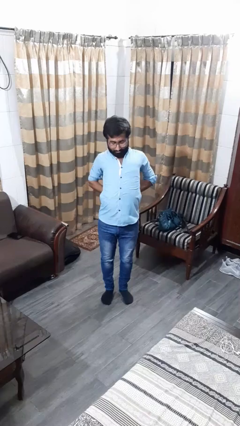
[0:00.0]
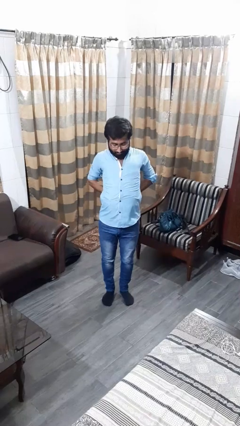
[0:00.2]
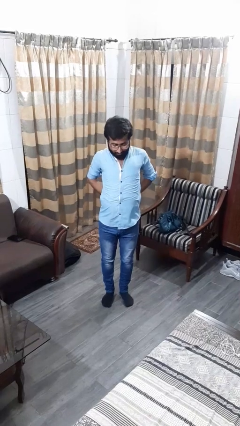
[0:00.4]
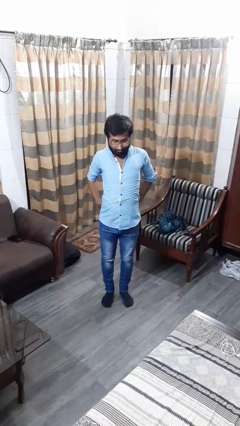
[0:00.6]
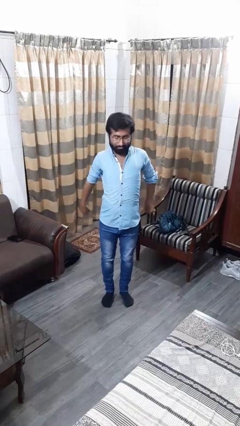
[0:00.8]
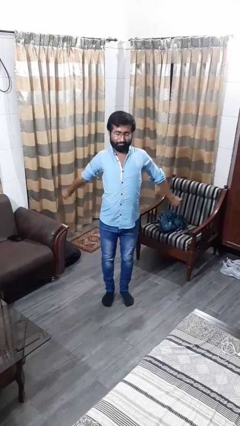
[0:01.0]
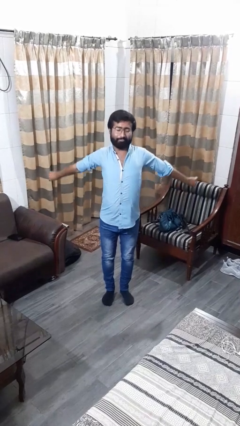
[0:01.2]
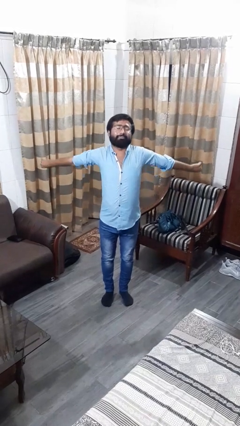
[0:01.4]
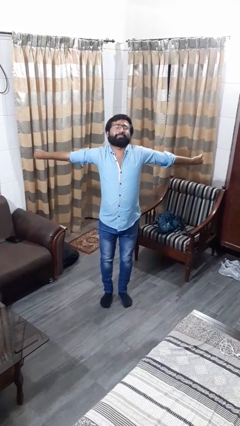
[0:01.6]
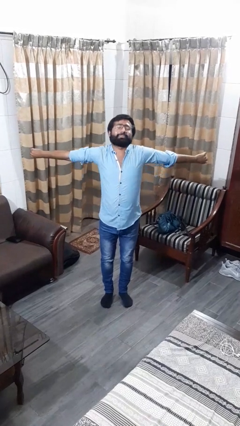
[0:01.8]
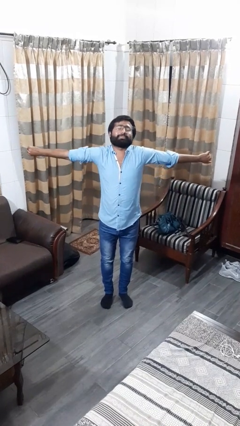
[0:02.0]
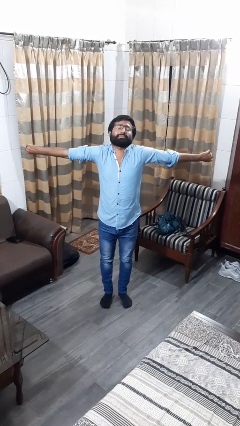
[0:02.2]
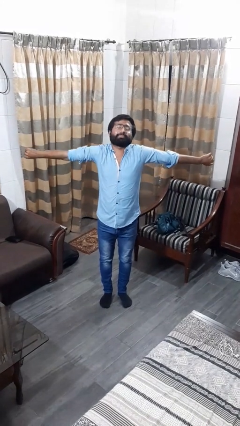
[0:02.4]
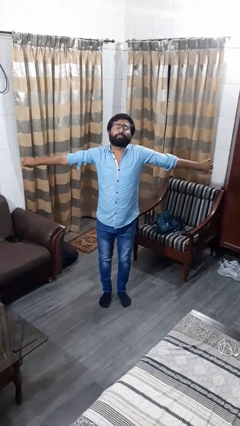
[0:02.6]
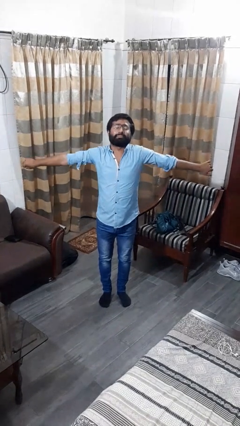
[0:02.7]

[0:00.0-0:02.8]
person stretches arms to side

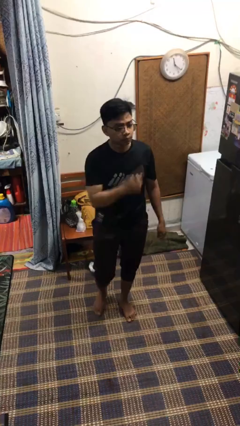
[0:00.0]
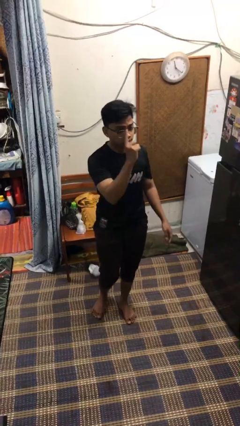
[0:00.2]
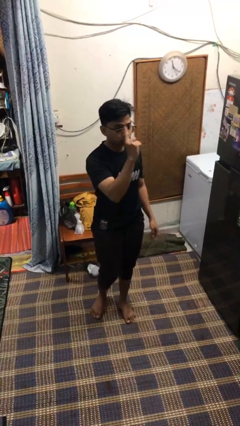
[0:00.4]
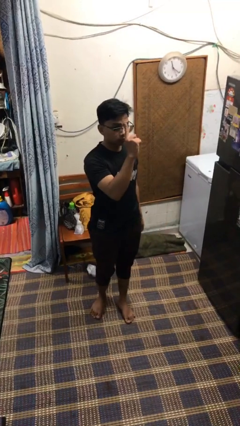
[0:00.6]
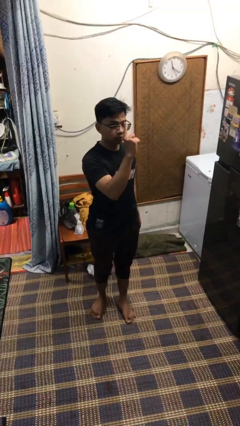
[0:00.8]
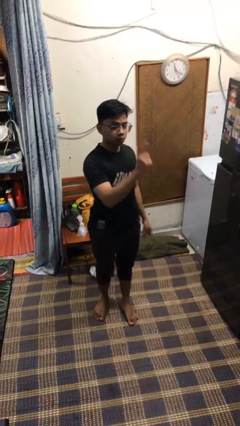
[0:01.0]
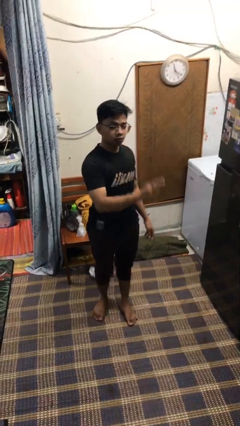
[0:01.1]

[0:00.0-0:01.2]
person gestures number one

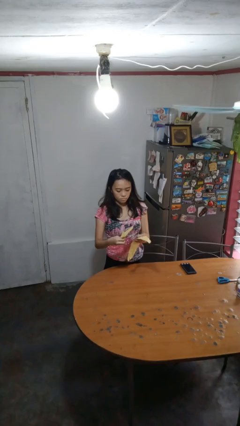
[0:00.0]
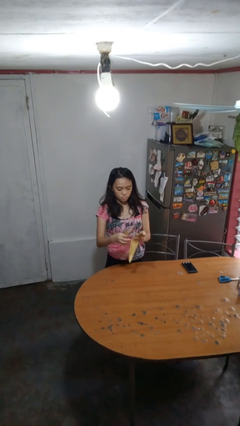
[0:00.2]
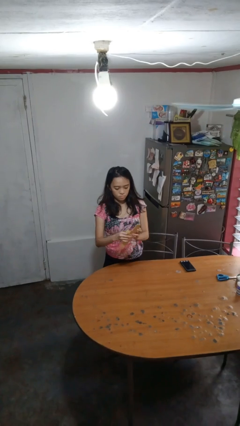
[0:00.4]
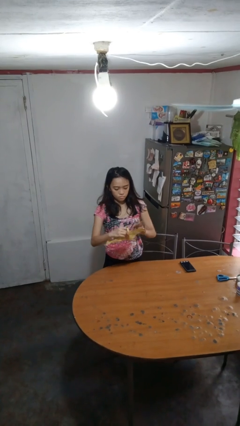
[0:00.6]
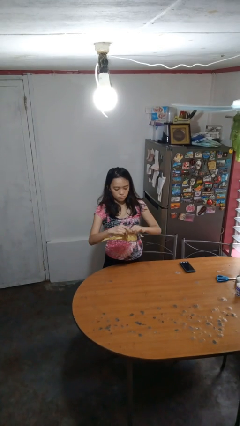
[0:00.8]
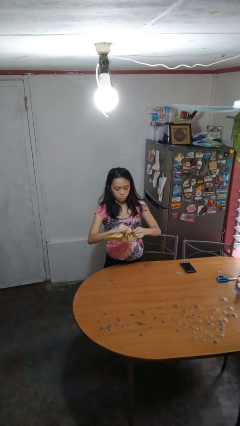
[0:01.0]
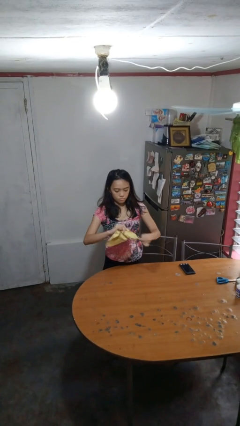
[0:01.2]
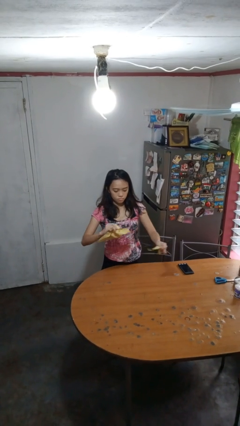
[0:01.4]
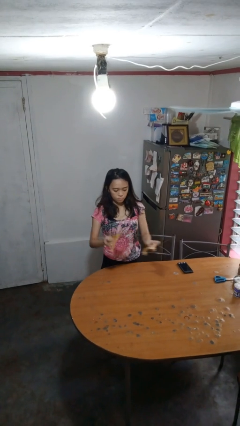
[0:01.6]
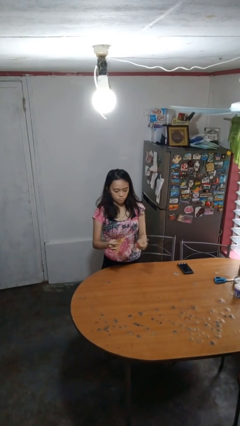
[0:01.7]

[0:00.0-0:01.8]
person tears paper

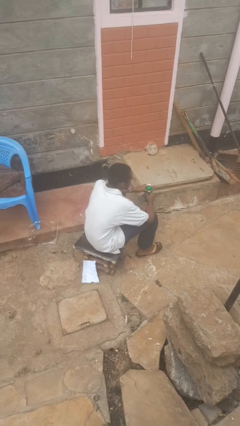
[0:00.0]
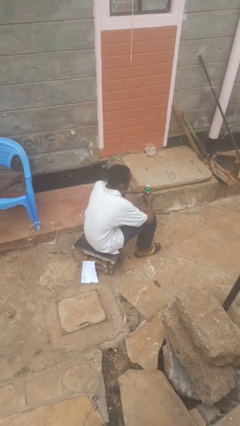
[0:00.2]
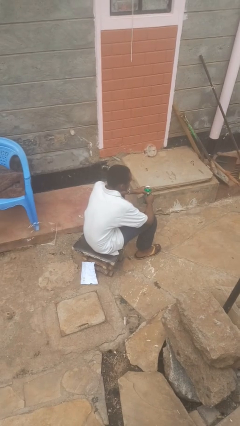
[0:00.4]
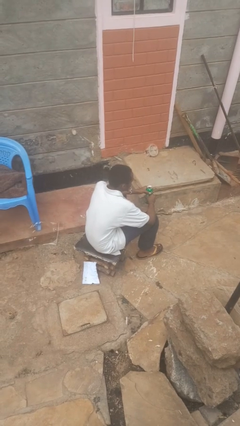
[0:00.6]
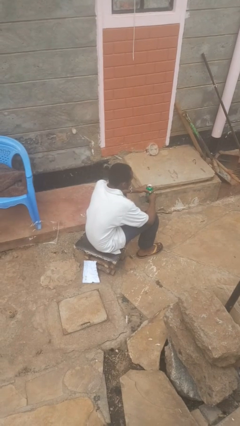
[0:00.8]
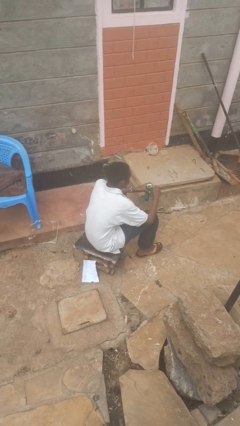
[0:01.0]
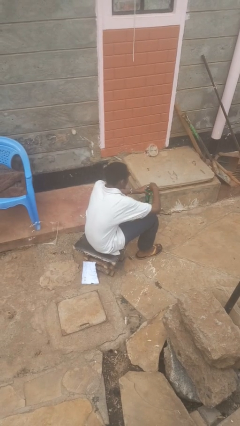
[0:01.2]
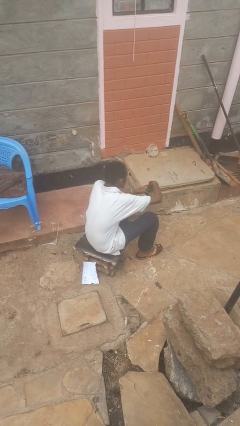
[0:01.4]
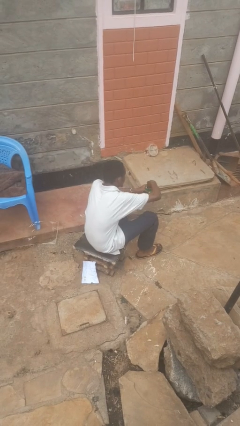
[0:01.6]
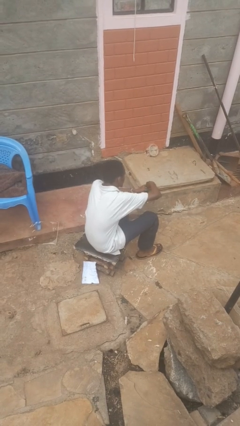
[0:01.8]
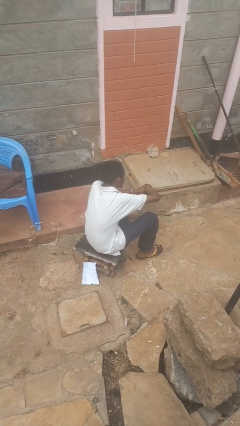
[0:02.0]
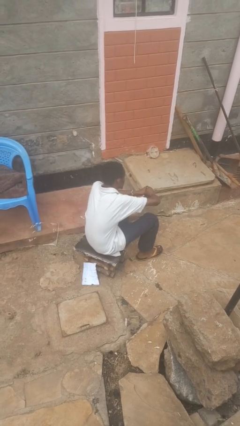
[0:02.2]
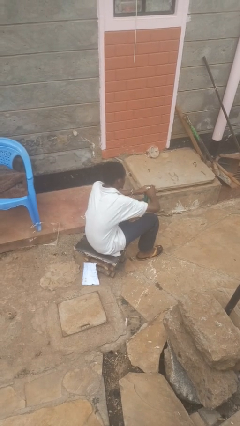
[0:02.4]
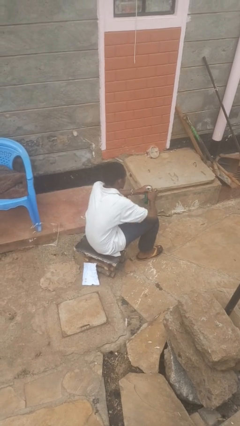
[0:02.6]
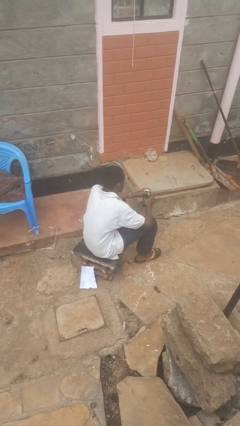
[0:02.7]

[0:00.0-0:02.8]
person opens beverage can

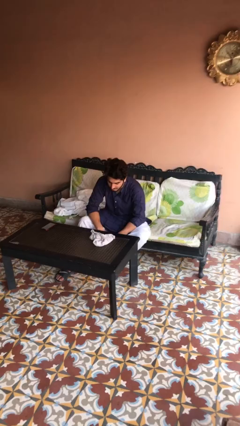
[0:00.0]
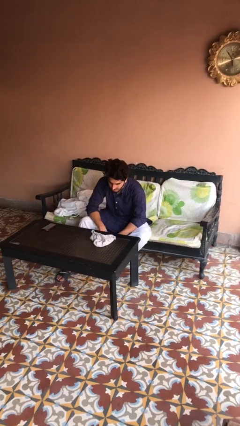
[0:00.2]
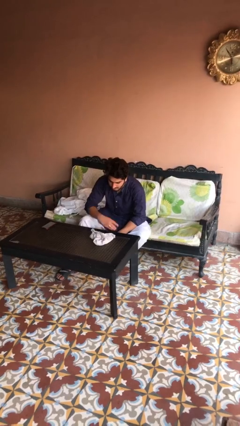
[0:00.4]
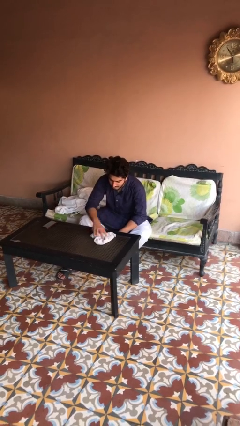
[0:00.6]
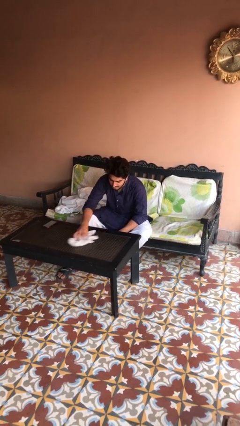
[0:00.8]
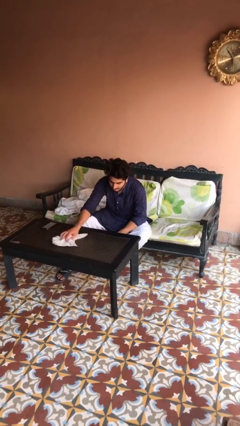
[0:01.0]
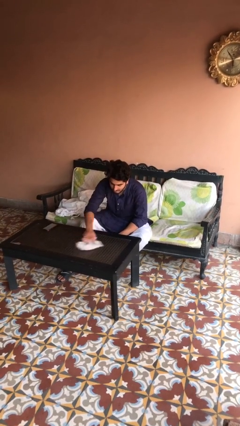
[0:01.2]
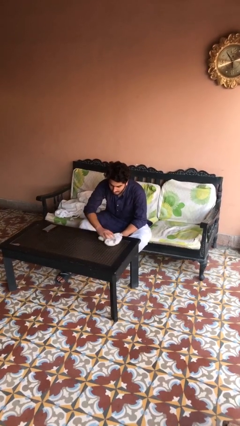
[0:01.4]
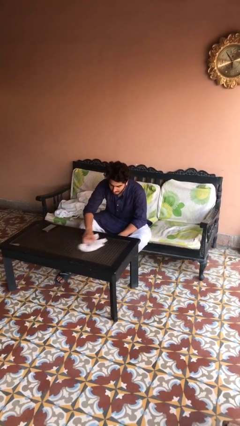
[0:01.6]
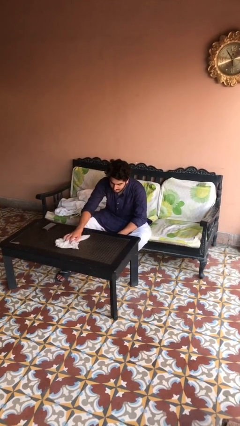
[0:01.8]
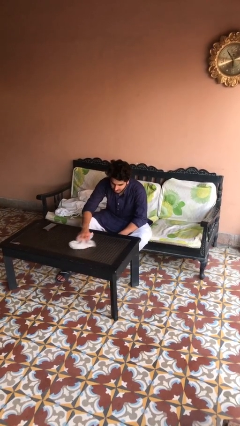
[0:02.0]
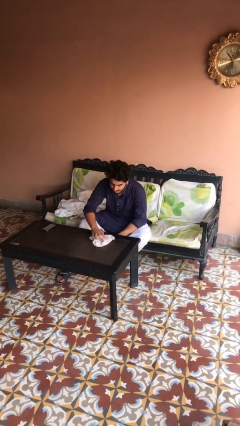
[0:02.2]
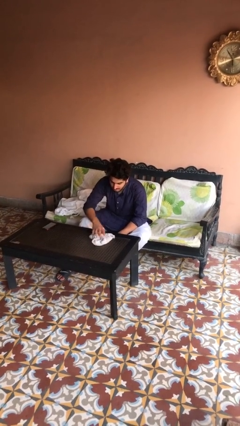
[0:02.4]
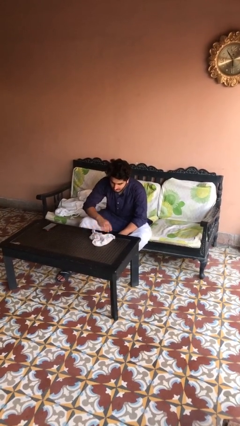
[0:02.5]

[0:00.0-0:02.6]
person cleans table with rag

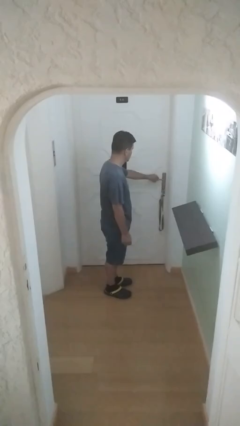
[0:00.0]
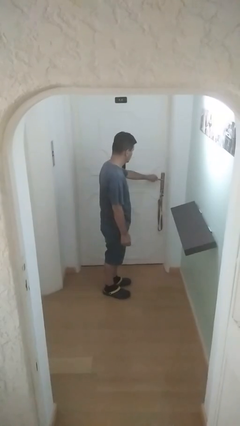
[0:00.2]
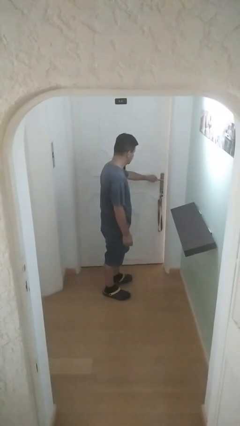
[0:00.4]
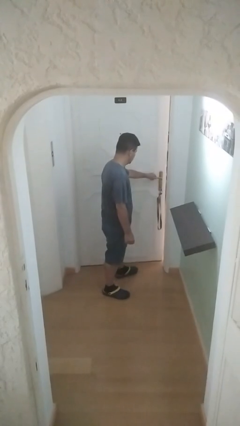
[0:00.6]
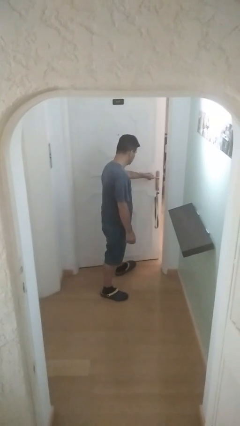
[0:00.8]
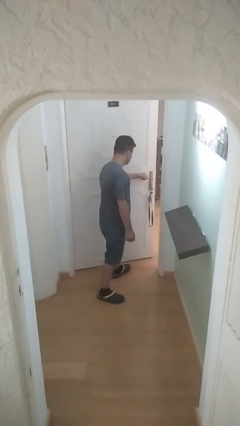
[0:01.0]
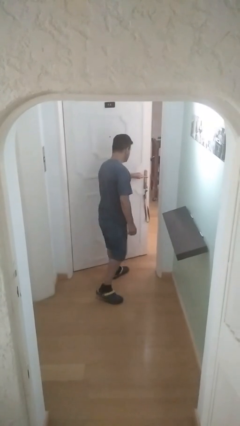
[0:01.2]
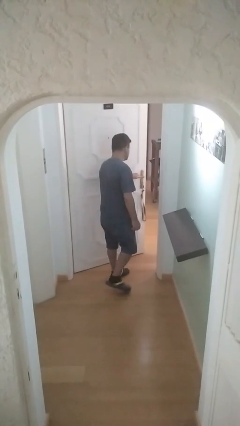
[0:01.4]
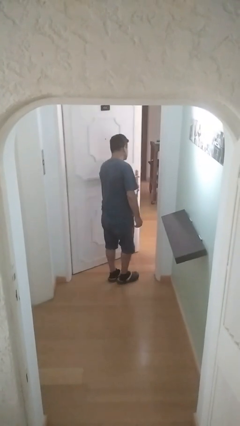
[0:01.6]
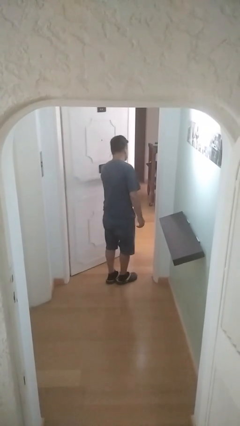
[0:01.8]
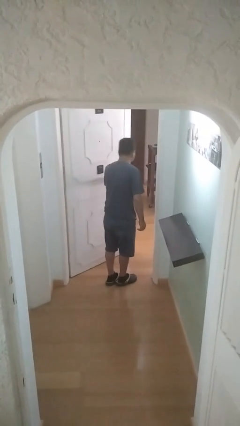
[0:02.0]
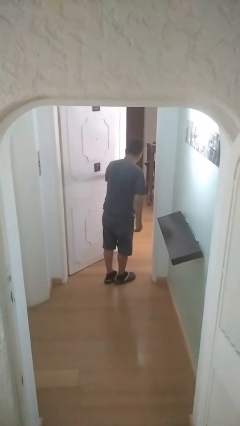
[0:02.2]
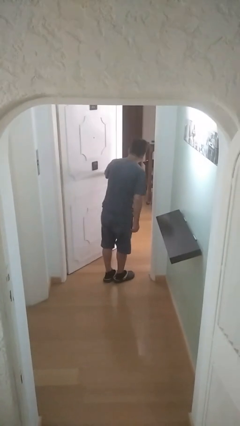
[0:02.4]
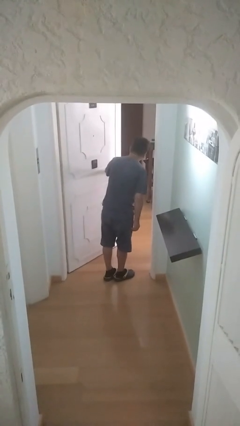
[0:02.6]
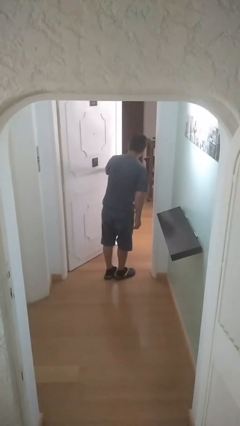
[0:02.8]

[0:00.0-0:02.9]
person opens facility door

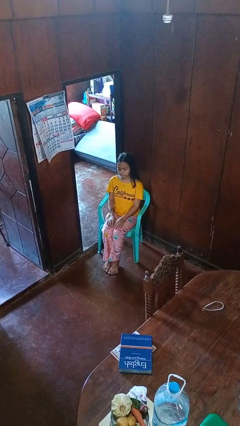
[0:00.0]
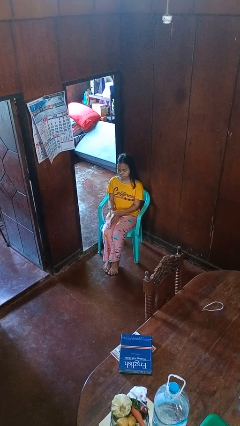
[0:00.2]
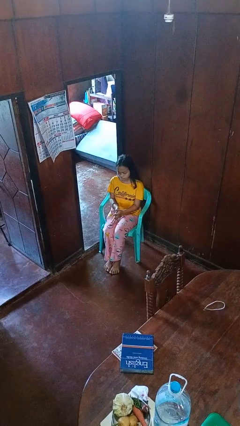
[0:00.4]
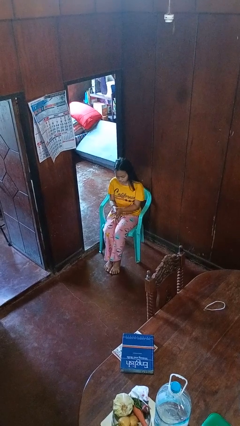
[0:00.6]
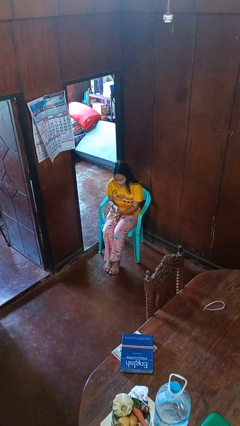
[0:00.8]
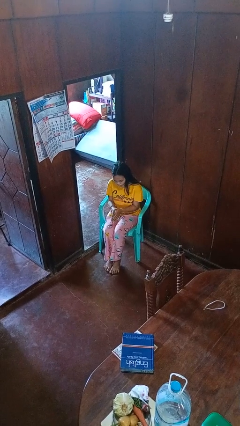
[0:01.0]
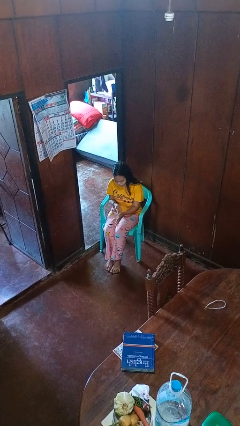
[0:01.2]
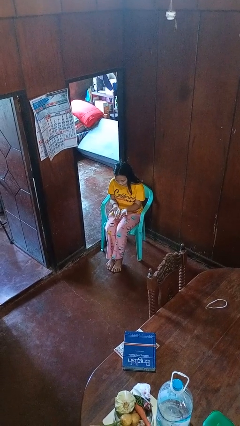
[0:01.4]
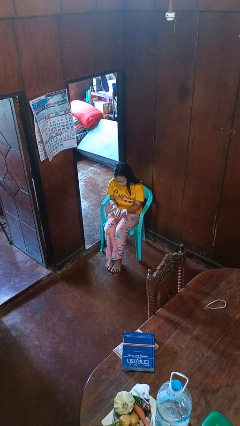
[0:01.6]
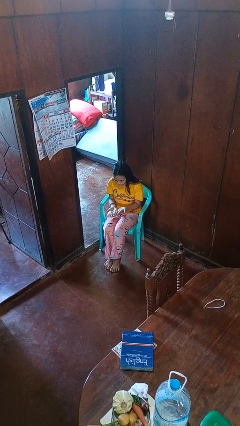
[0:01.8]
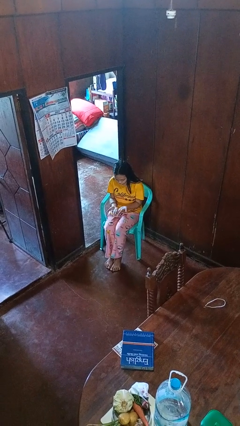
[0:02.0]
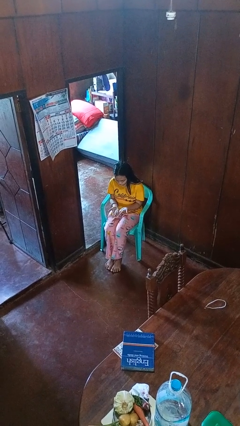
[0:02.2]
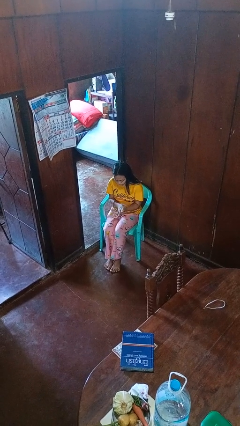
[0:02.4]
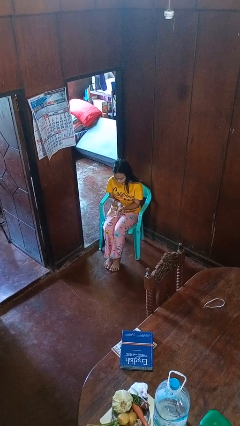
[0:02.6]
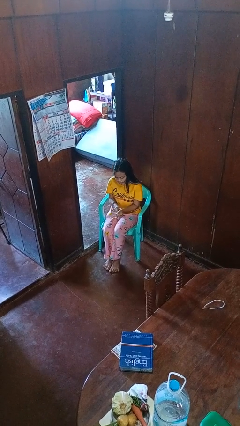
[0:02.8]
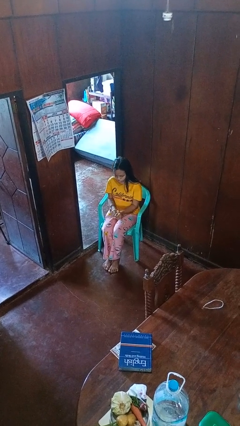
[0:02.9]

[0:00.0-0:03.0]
person looks at hands in lap

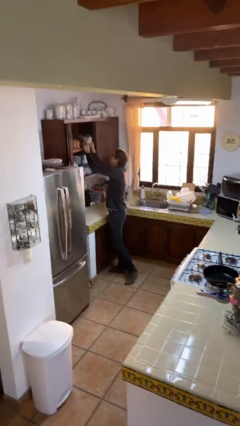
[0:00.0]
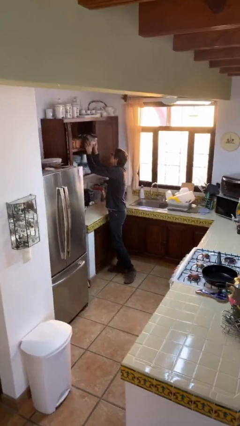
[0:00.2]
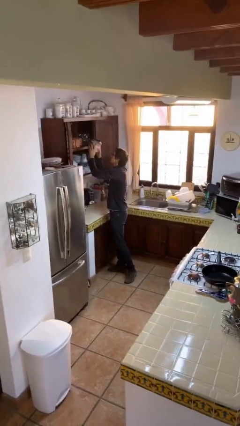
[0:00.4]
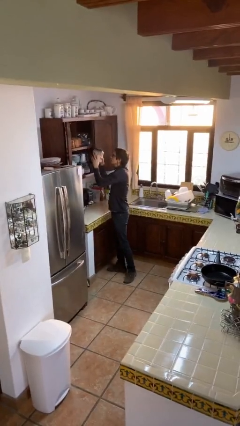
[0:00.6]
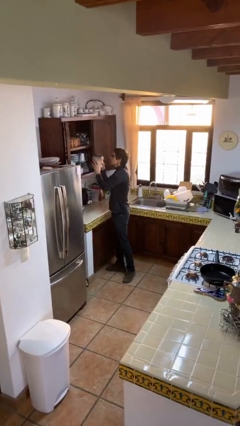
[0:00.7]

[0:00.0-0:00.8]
person picks up object from shelf
